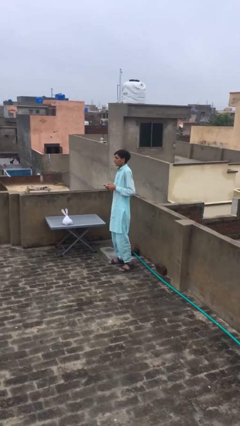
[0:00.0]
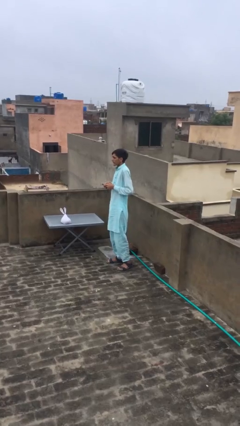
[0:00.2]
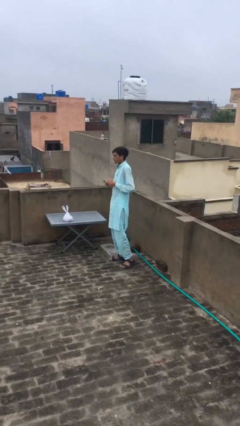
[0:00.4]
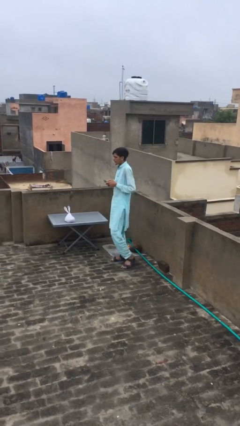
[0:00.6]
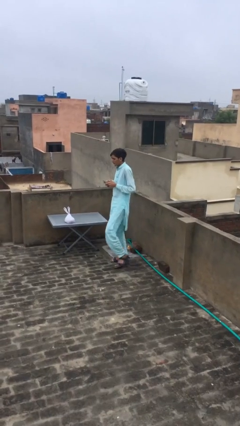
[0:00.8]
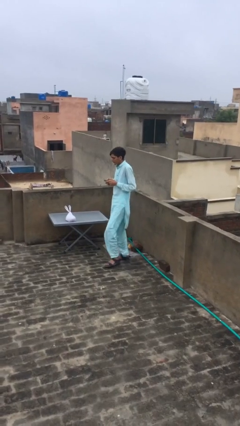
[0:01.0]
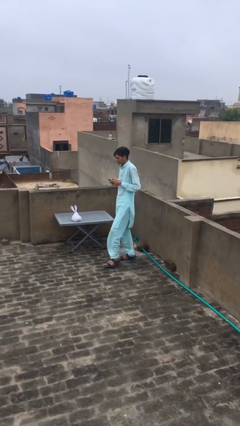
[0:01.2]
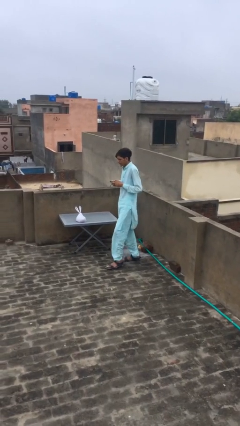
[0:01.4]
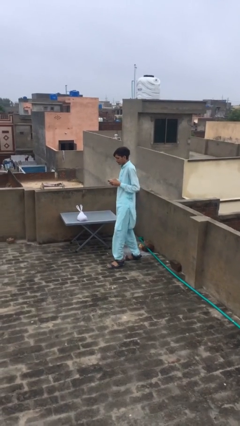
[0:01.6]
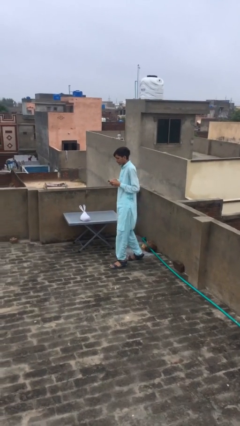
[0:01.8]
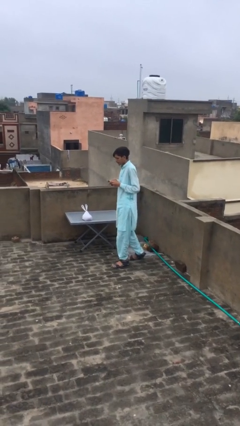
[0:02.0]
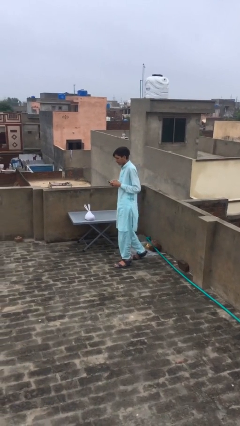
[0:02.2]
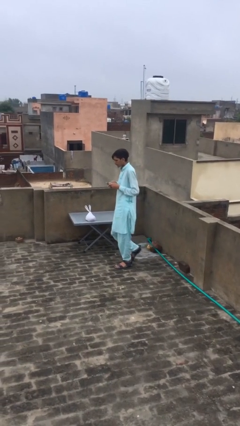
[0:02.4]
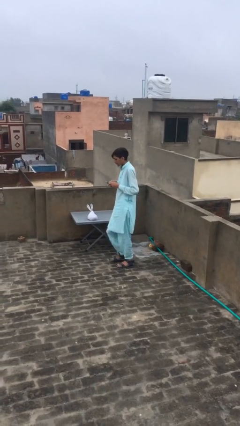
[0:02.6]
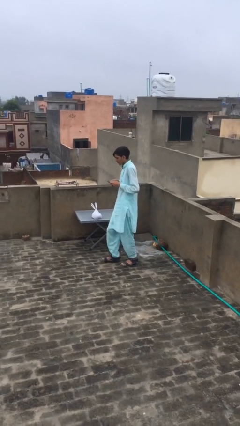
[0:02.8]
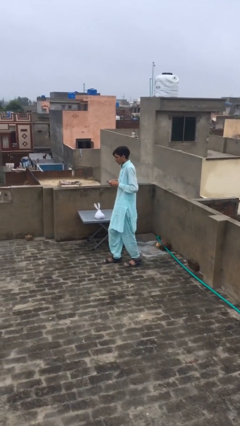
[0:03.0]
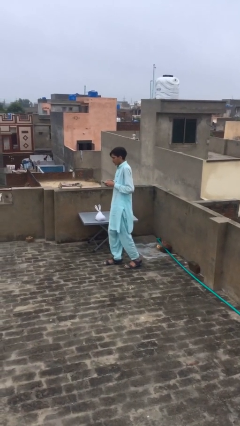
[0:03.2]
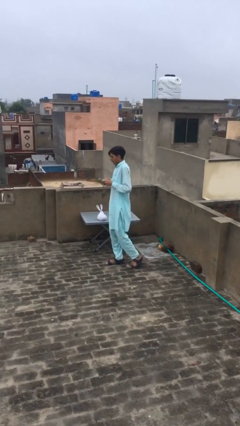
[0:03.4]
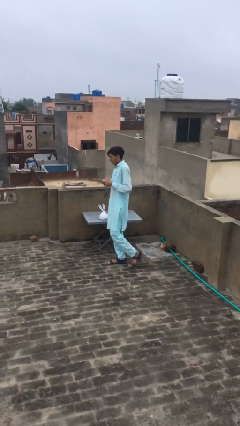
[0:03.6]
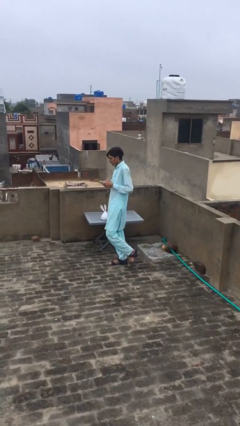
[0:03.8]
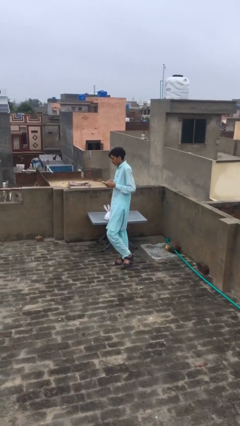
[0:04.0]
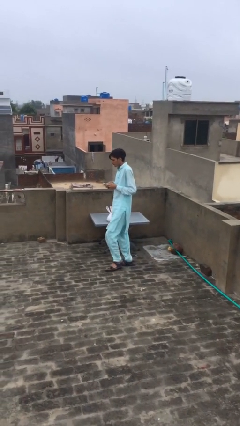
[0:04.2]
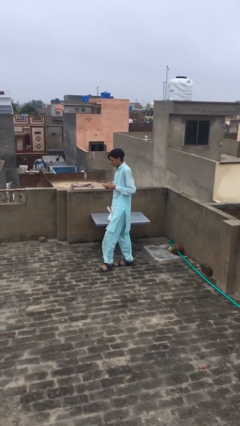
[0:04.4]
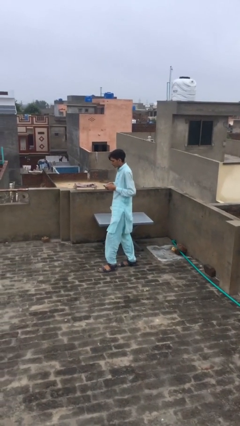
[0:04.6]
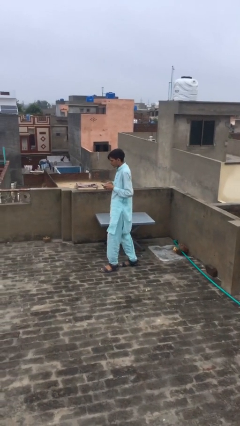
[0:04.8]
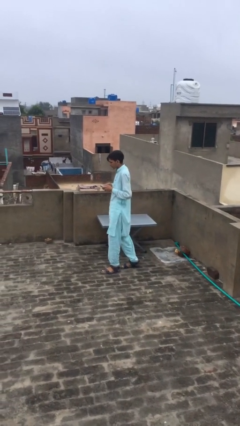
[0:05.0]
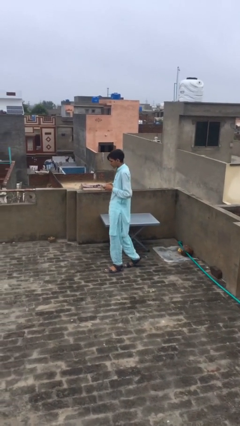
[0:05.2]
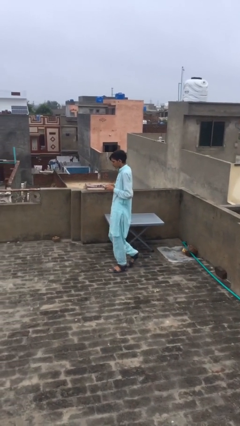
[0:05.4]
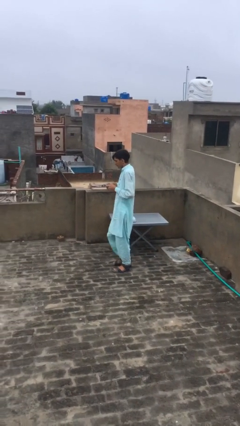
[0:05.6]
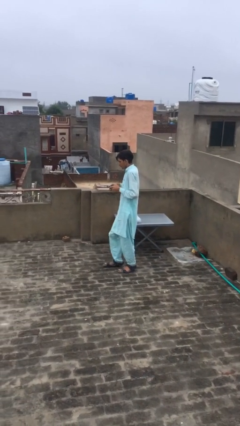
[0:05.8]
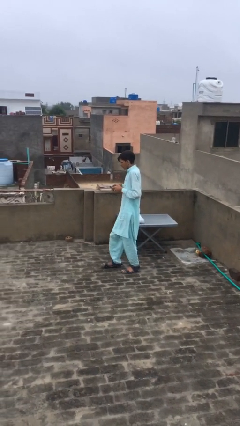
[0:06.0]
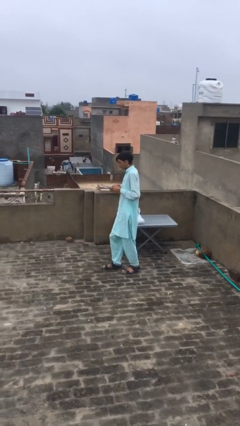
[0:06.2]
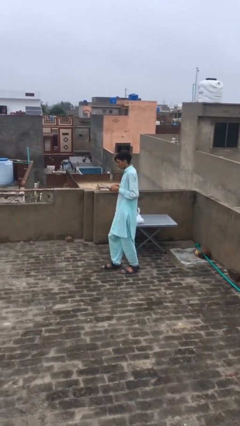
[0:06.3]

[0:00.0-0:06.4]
person texts on phone

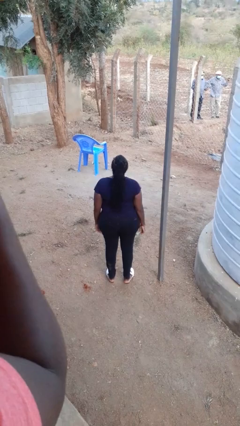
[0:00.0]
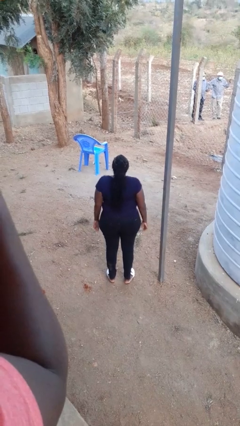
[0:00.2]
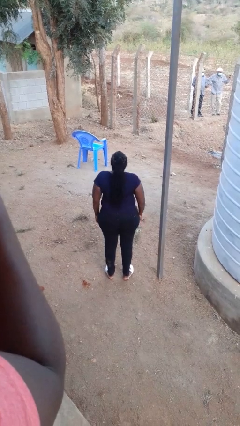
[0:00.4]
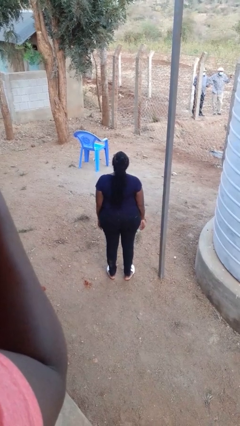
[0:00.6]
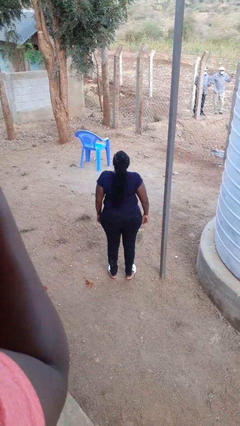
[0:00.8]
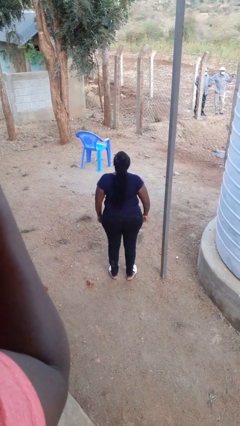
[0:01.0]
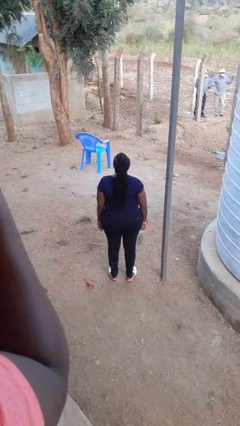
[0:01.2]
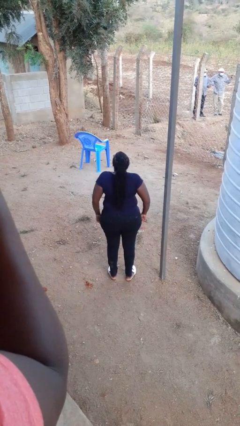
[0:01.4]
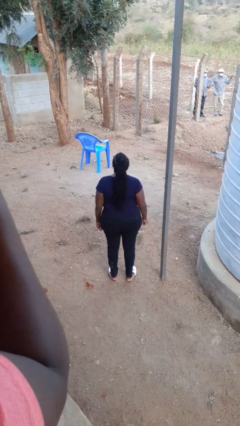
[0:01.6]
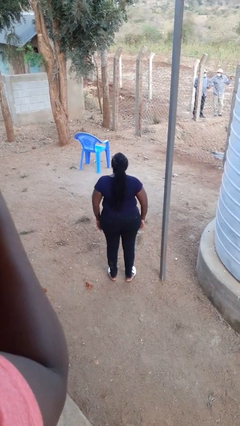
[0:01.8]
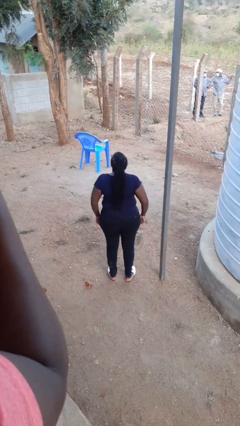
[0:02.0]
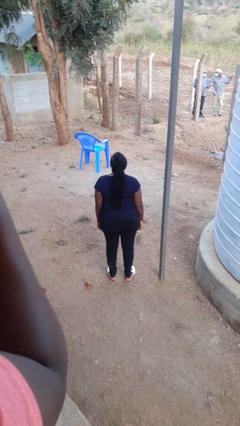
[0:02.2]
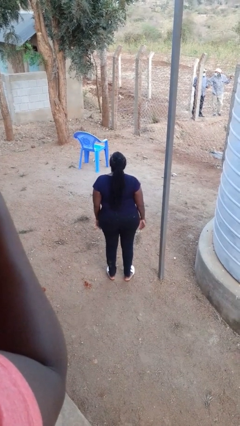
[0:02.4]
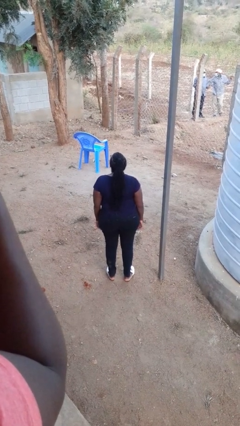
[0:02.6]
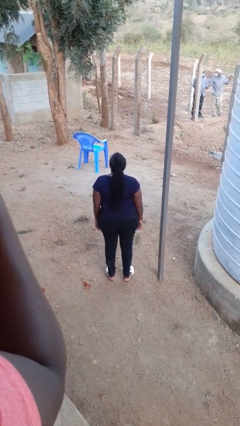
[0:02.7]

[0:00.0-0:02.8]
person shrugs

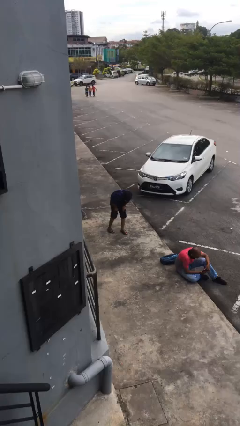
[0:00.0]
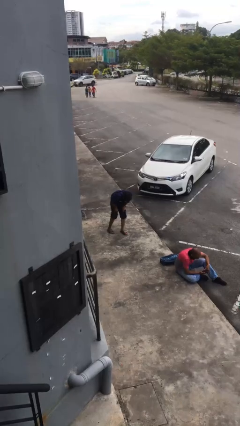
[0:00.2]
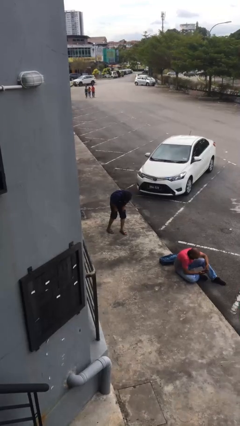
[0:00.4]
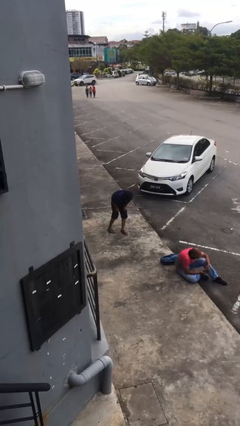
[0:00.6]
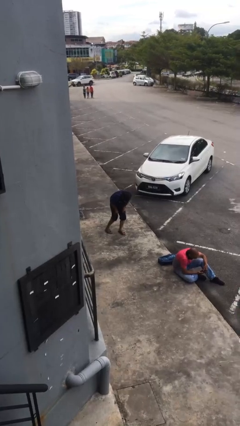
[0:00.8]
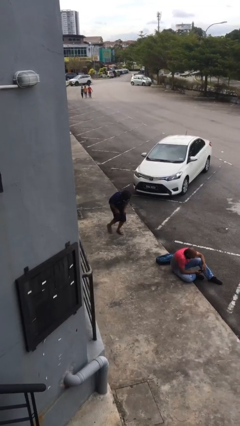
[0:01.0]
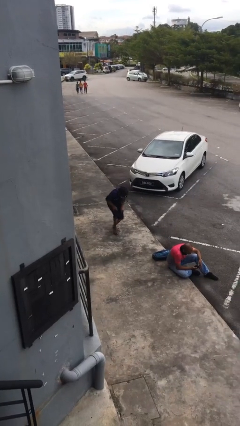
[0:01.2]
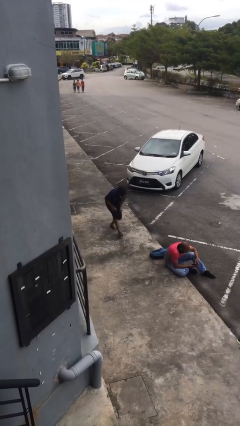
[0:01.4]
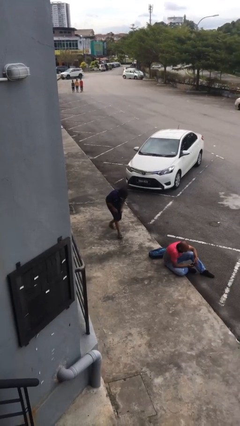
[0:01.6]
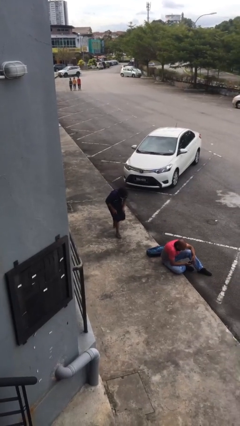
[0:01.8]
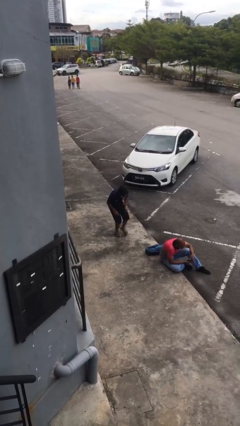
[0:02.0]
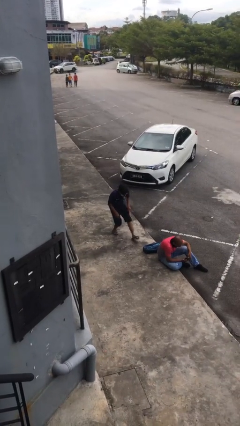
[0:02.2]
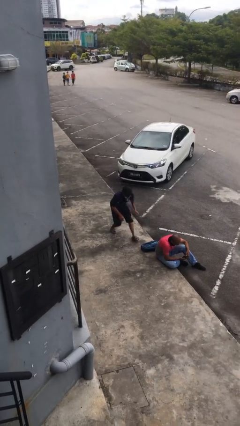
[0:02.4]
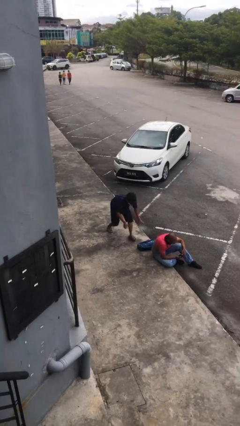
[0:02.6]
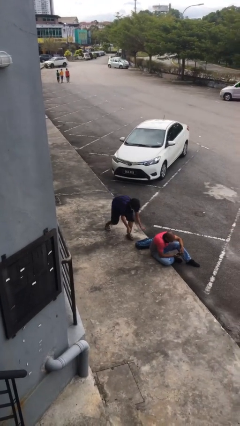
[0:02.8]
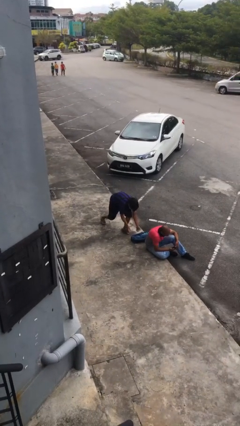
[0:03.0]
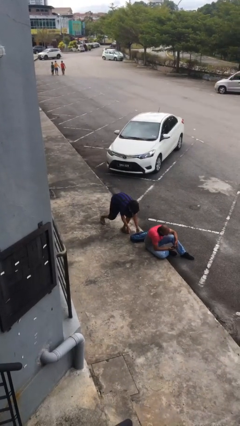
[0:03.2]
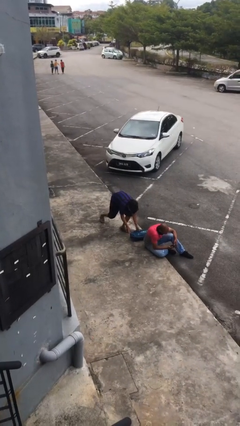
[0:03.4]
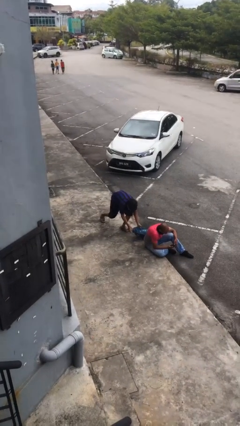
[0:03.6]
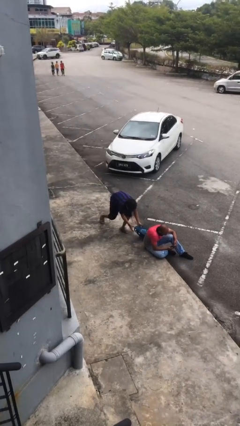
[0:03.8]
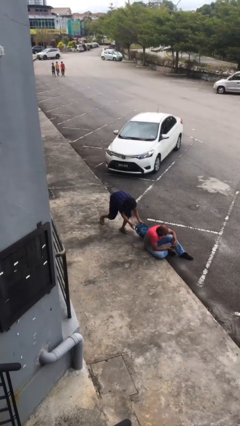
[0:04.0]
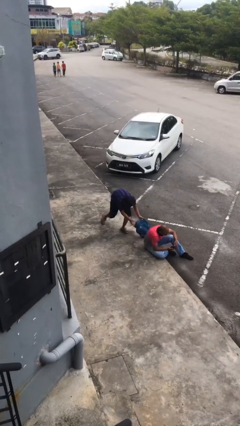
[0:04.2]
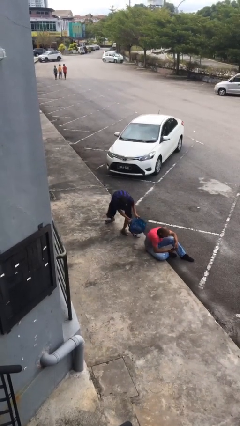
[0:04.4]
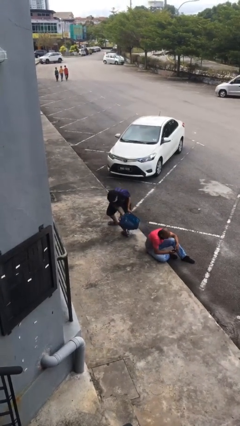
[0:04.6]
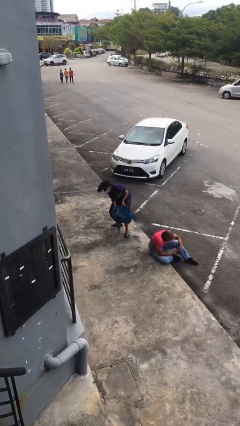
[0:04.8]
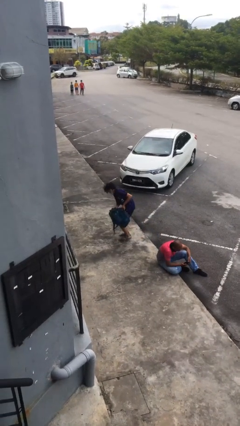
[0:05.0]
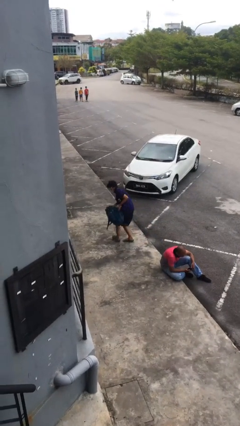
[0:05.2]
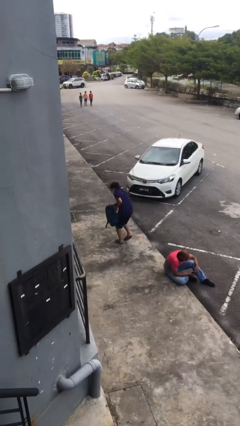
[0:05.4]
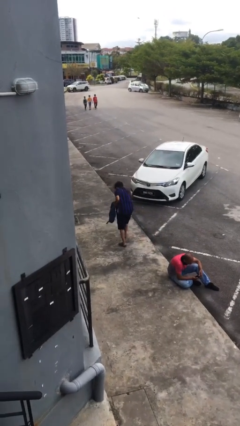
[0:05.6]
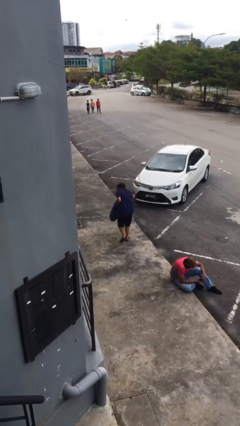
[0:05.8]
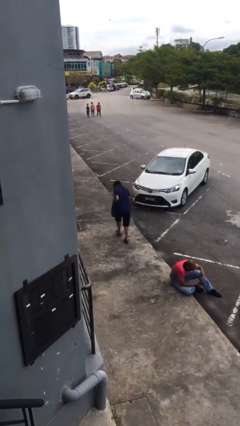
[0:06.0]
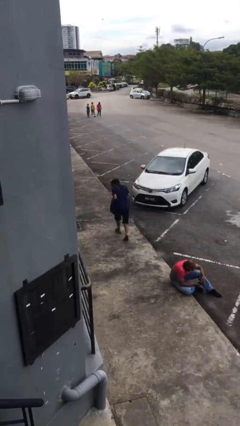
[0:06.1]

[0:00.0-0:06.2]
person steals object from person

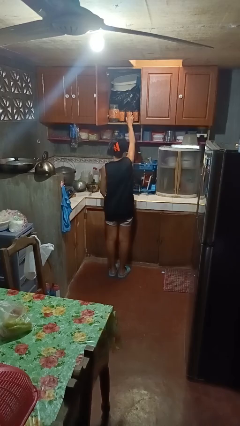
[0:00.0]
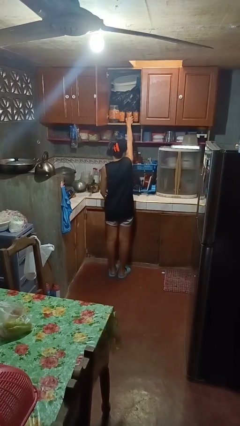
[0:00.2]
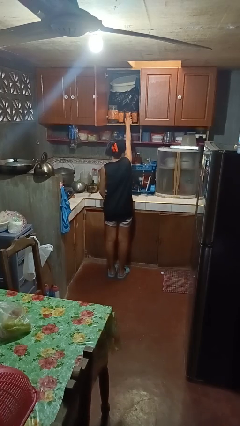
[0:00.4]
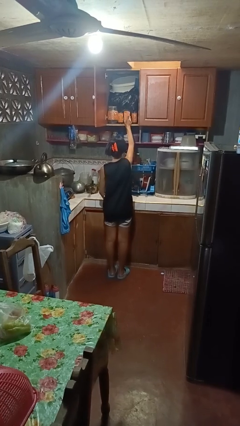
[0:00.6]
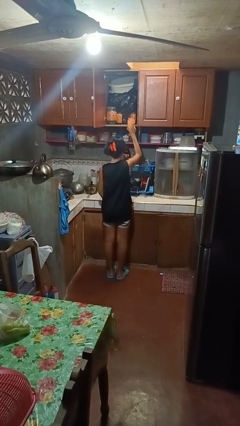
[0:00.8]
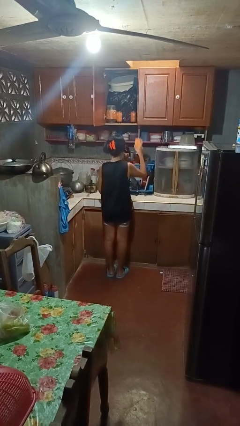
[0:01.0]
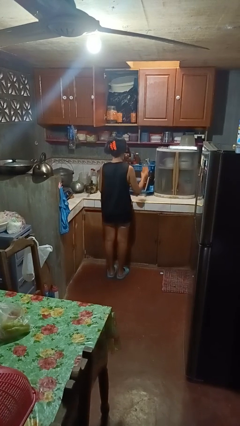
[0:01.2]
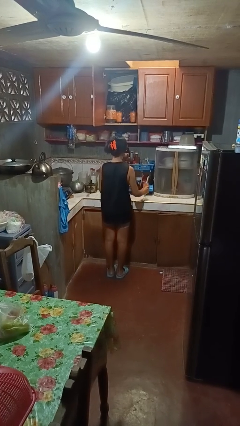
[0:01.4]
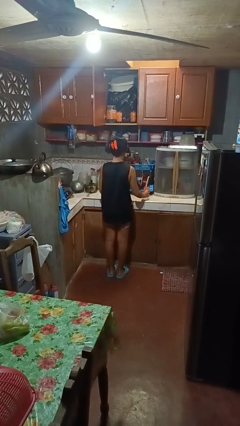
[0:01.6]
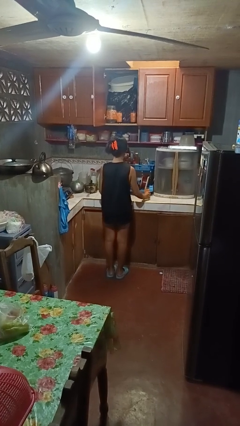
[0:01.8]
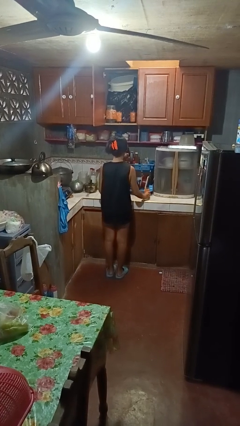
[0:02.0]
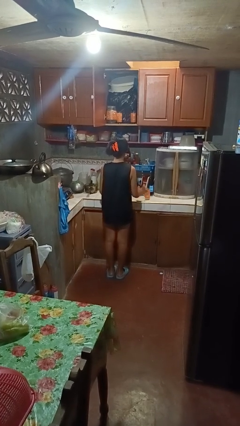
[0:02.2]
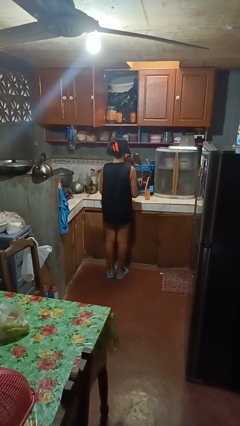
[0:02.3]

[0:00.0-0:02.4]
person takes object from cabinet
